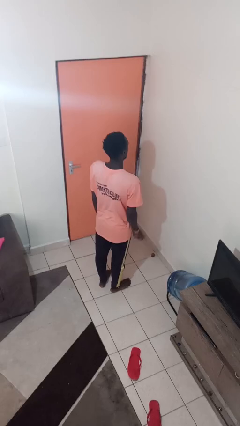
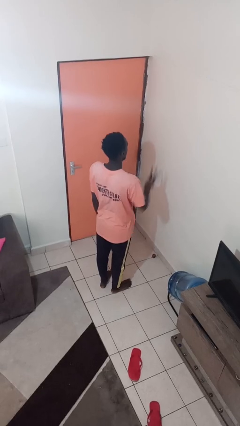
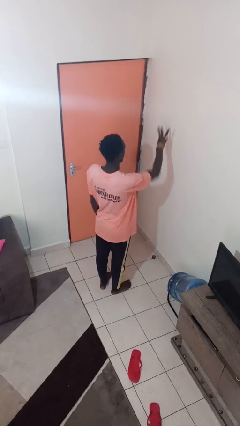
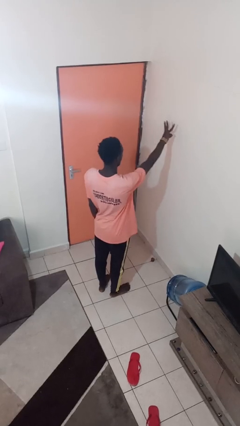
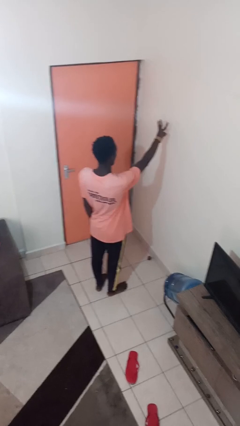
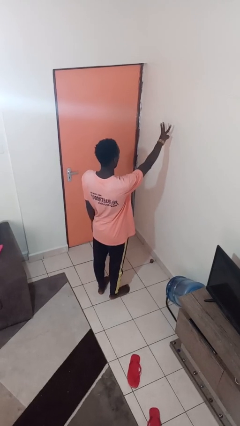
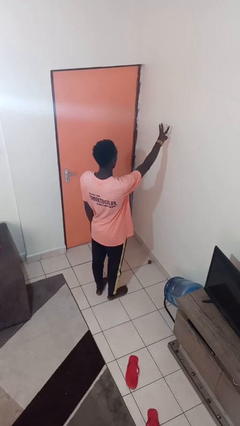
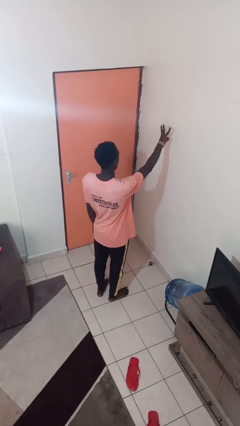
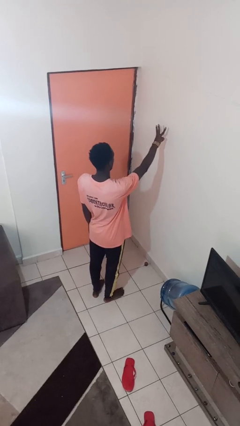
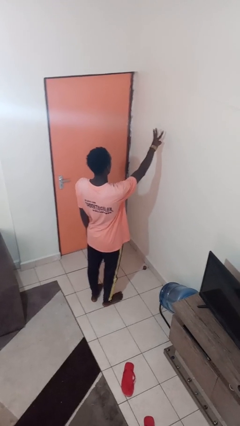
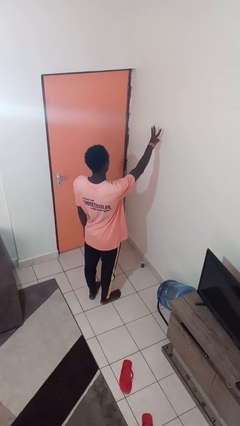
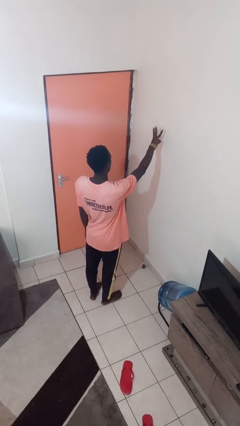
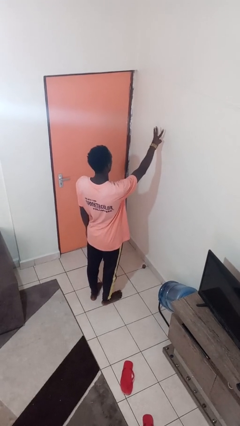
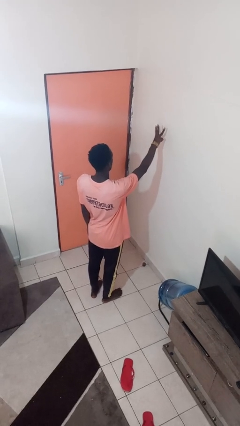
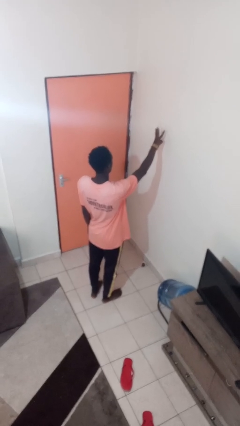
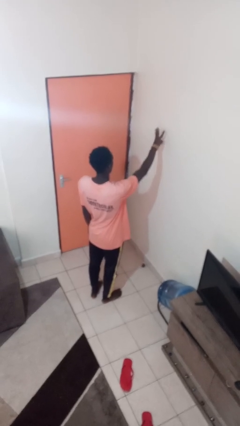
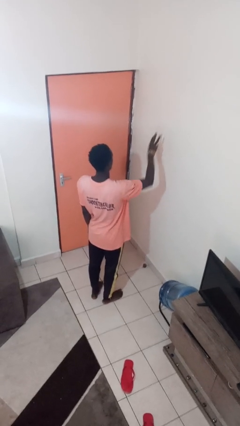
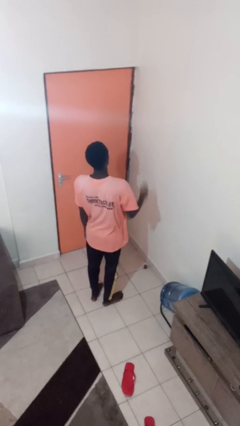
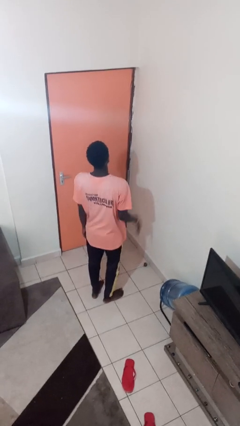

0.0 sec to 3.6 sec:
person gestures number three

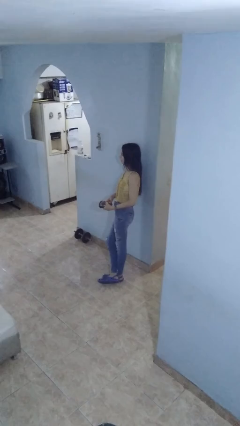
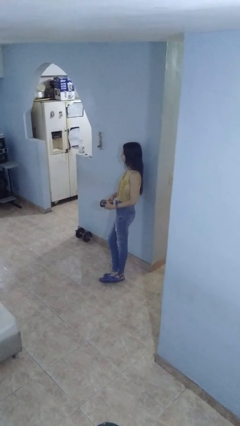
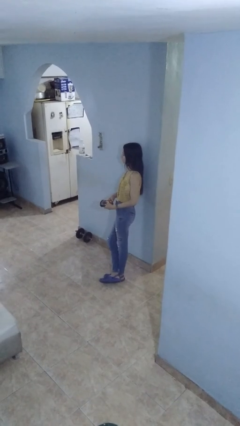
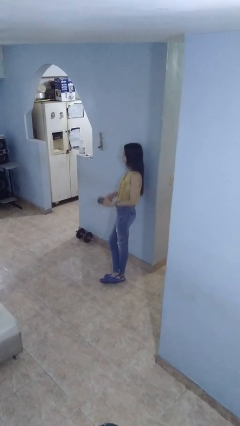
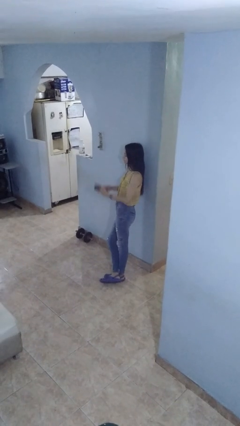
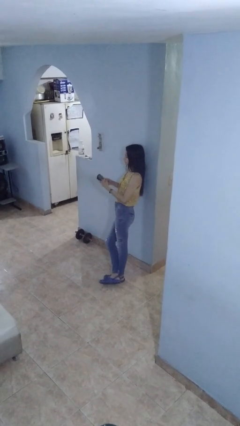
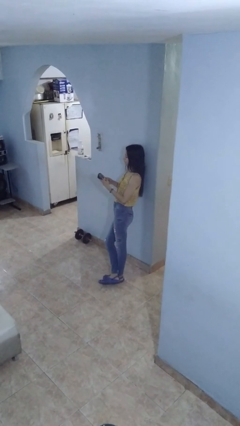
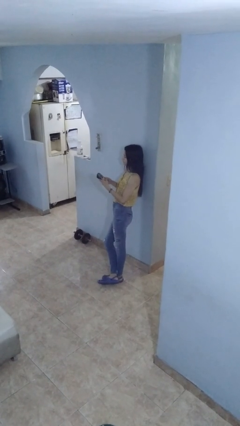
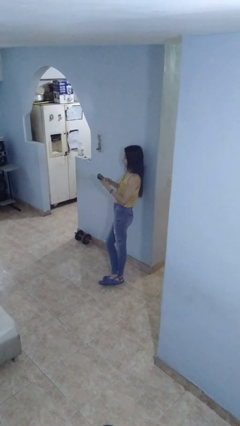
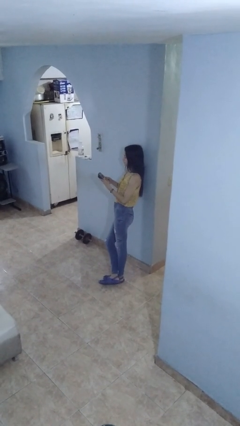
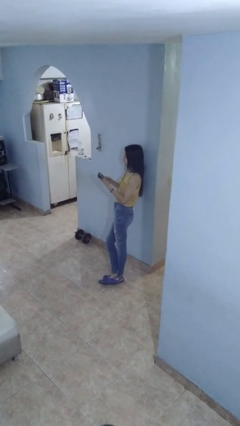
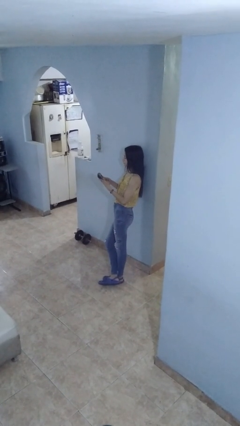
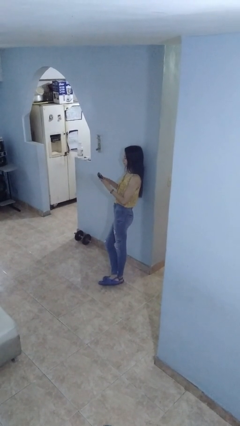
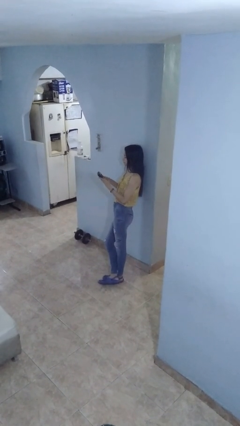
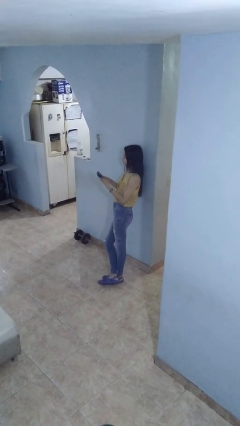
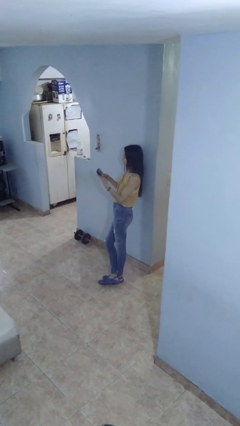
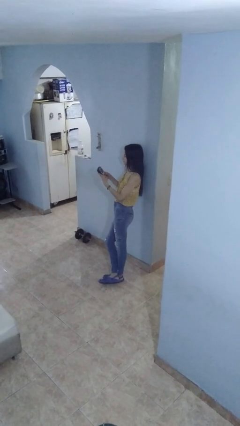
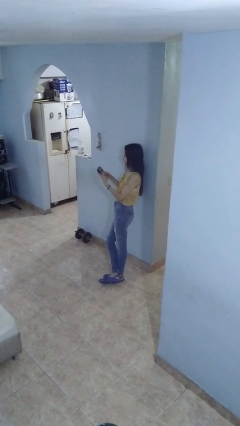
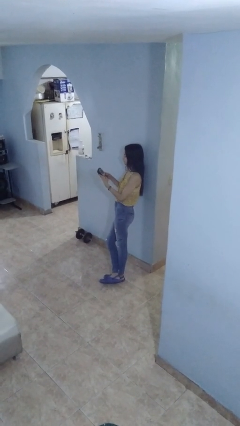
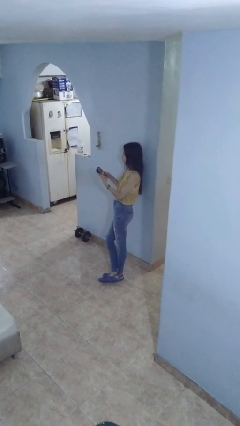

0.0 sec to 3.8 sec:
person interacts with handheld game

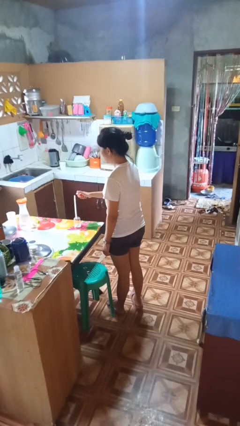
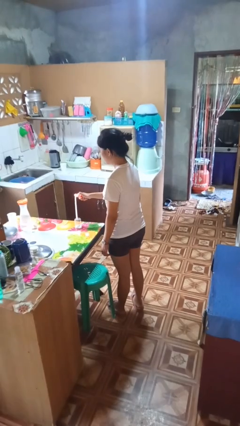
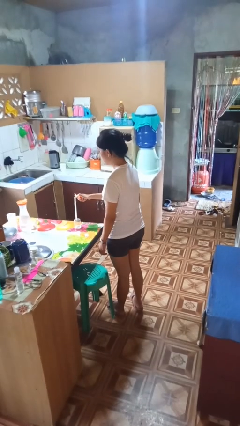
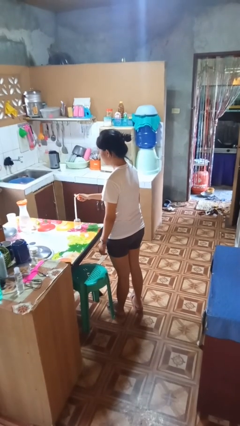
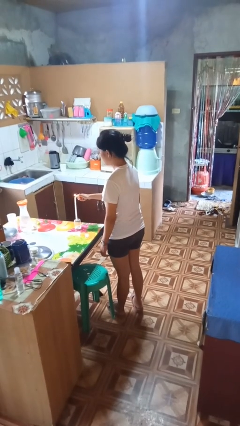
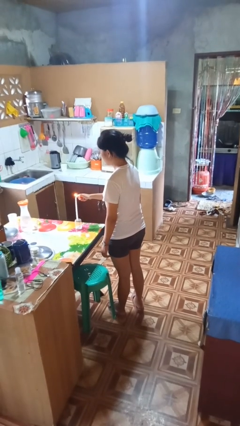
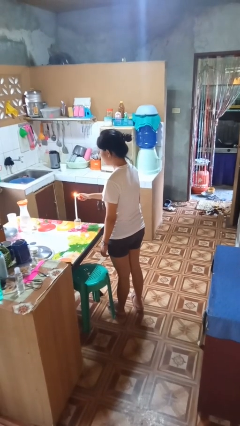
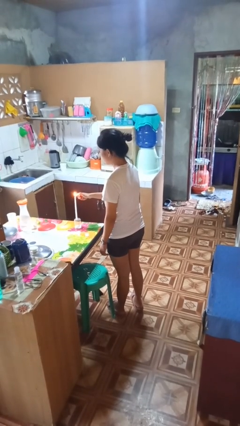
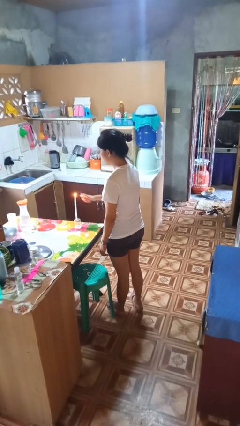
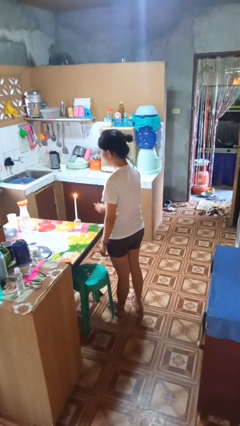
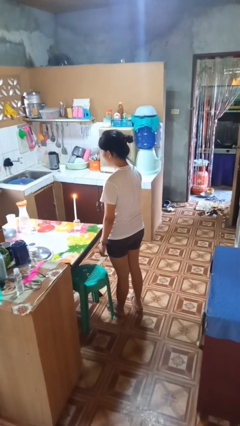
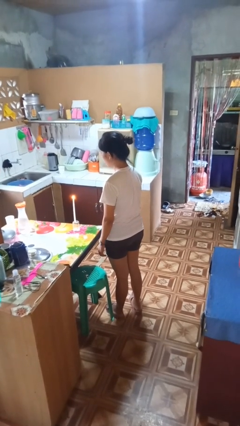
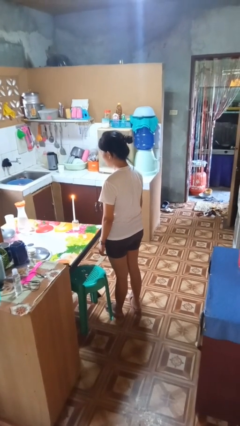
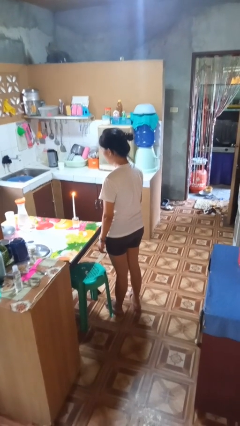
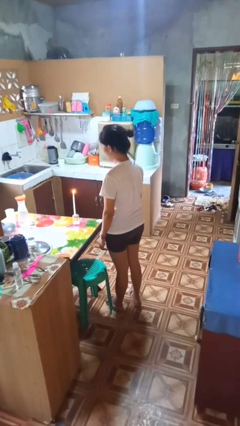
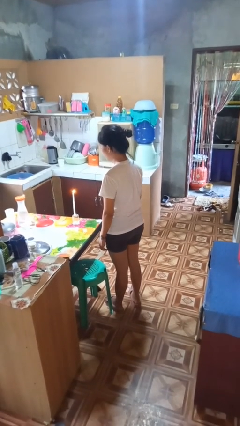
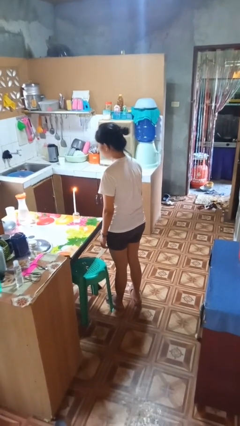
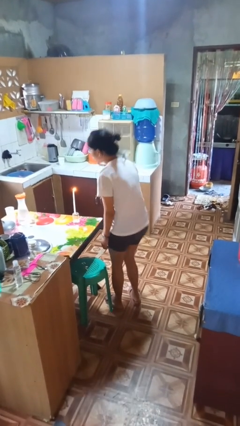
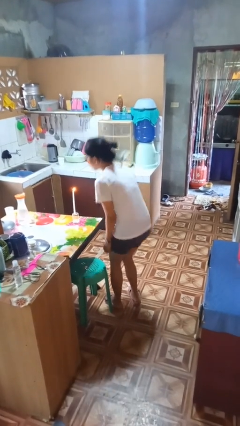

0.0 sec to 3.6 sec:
person lights candle

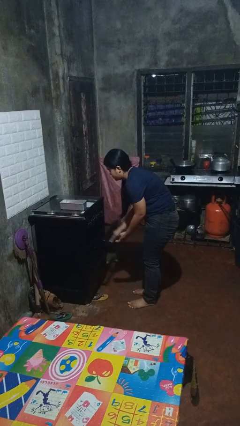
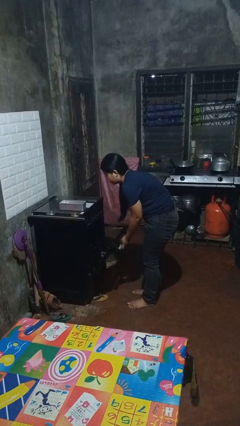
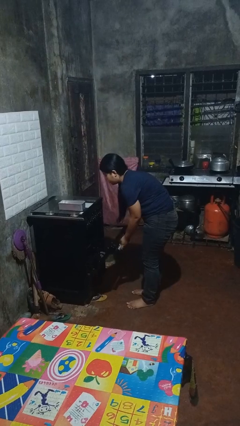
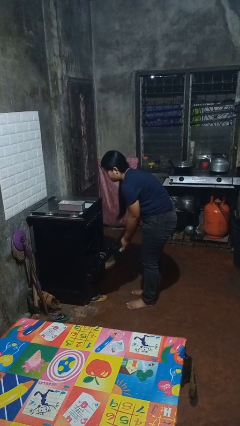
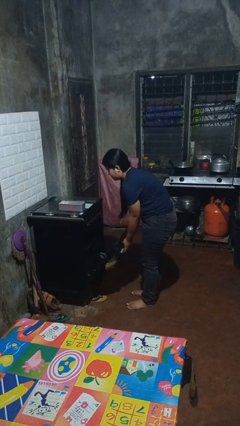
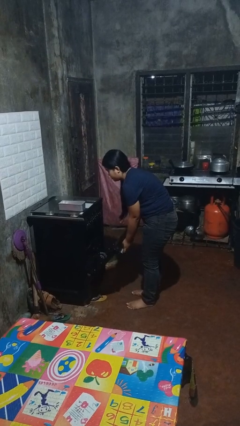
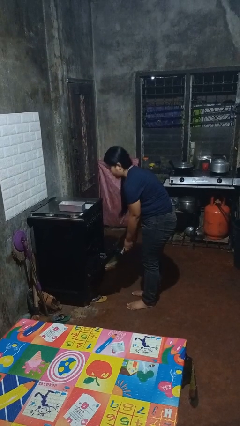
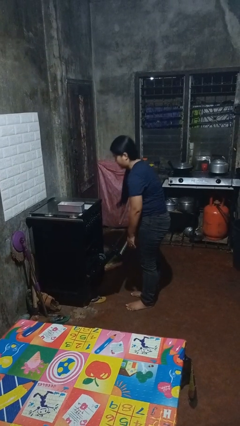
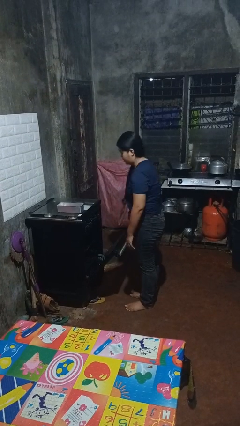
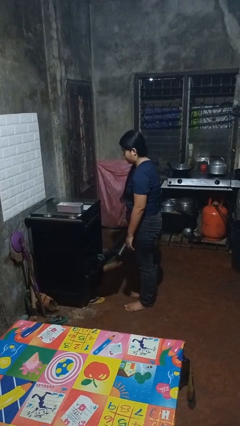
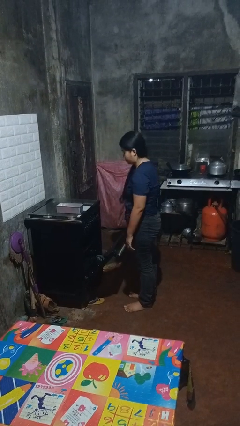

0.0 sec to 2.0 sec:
person opens oven door

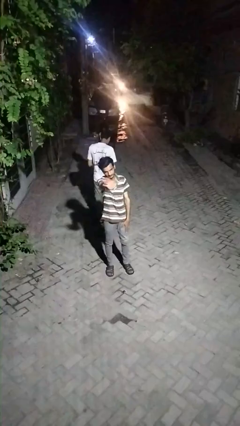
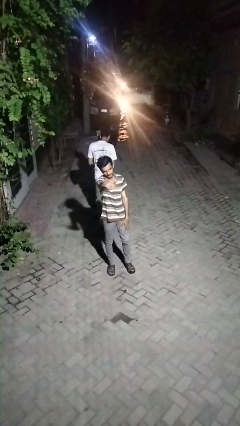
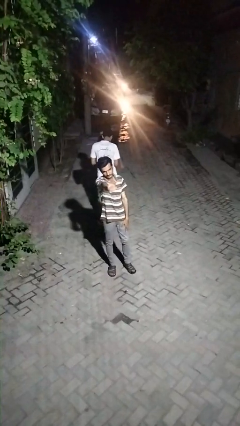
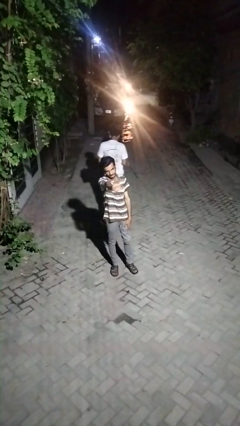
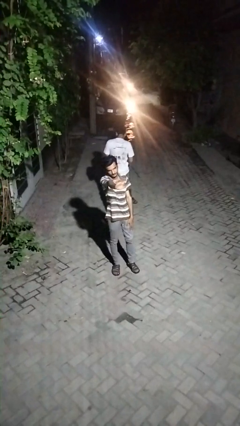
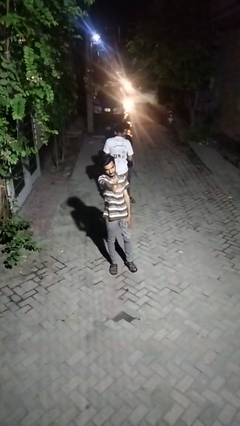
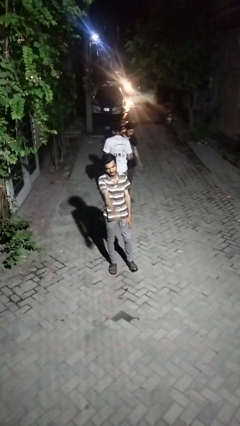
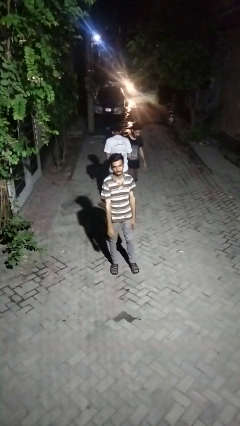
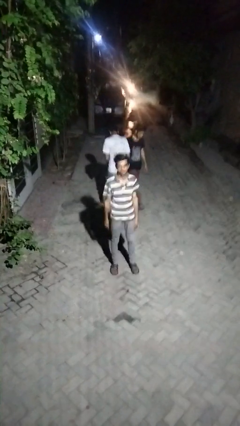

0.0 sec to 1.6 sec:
person waves at person

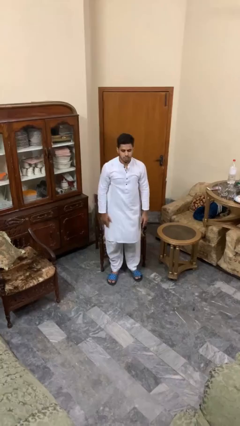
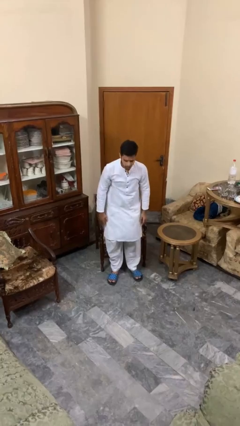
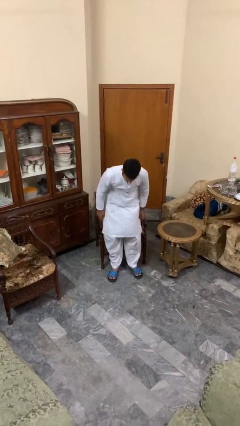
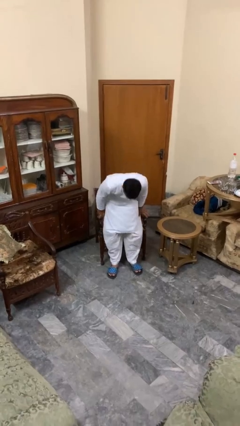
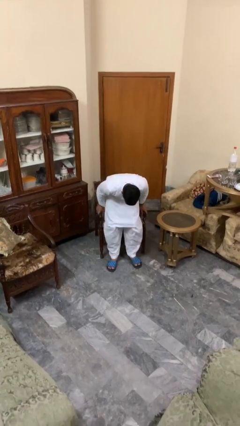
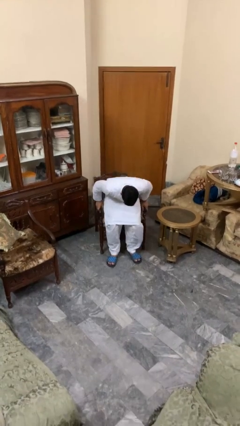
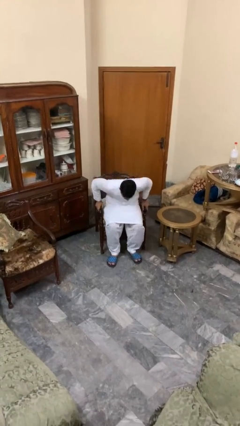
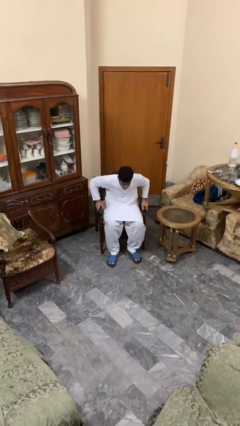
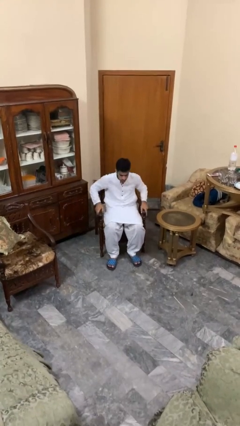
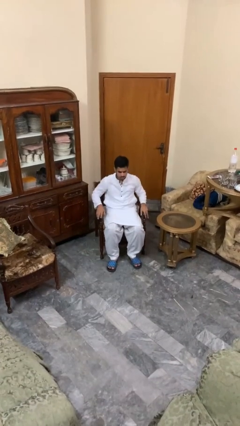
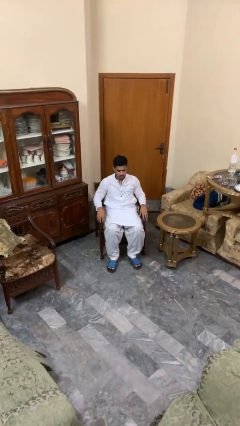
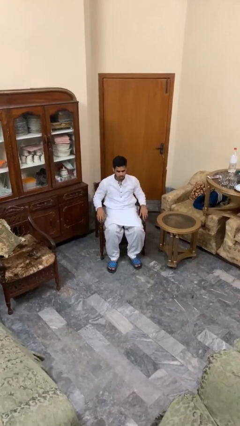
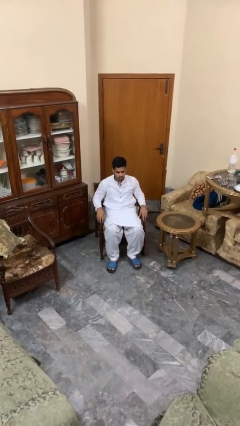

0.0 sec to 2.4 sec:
person sits down

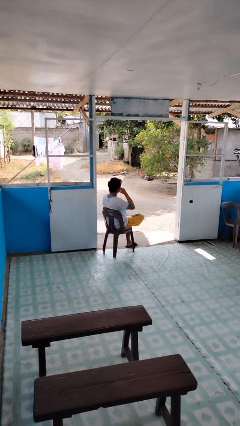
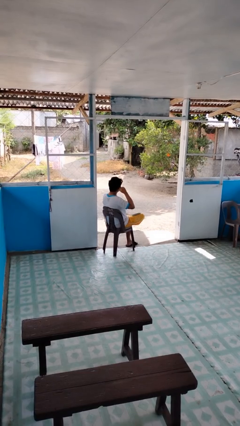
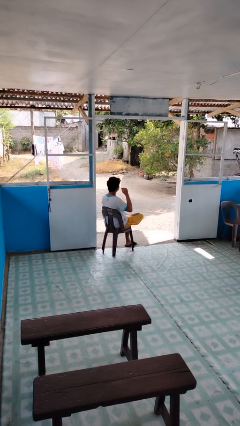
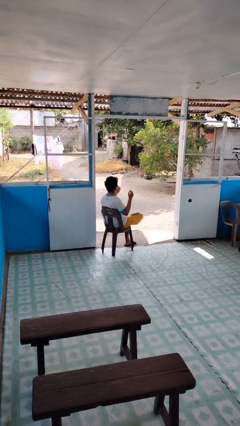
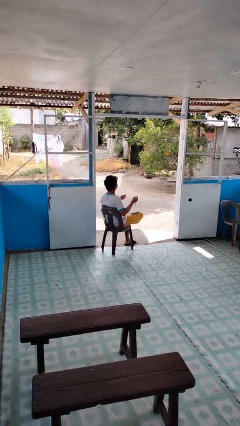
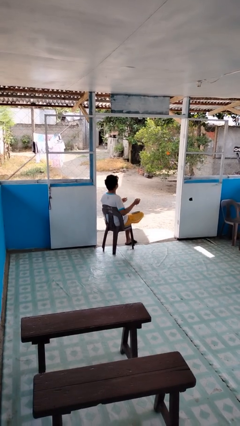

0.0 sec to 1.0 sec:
person takes off headphones
